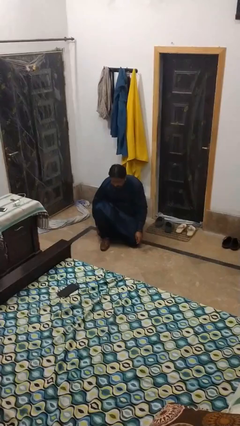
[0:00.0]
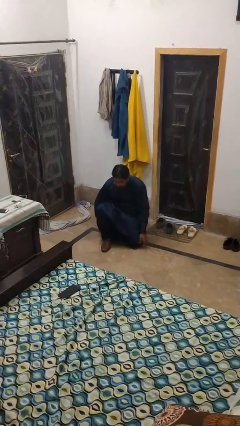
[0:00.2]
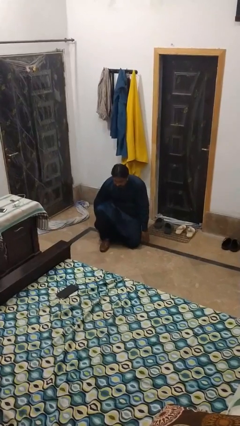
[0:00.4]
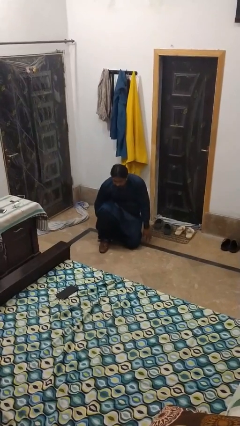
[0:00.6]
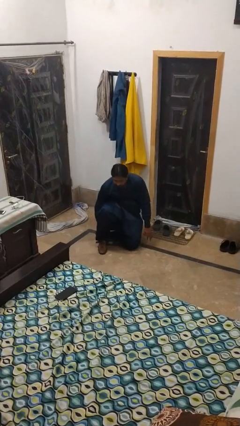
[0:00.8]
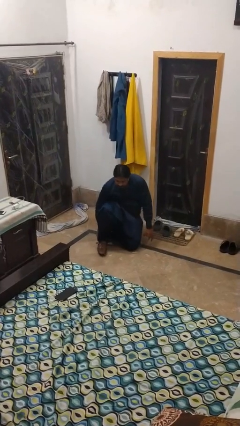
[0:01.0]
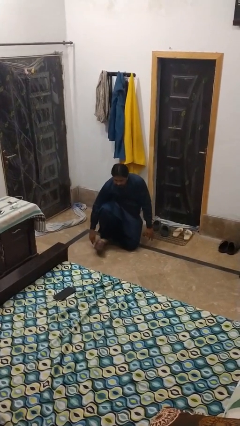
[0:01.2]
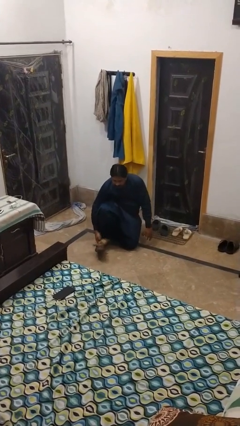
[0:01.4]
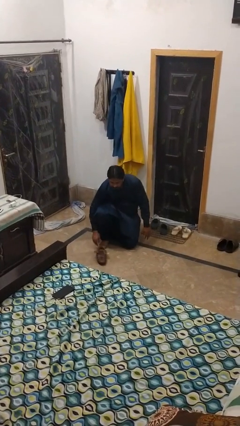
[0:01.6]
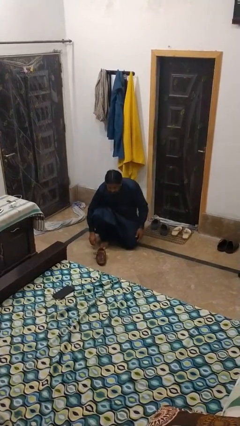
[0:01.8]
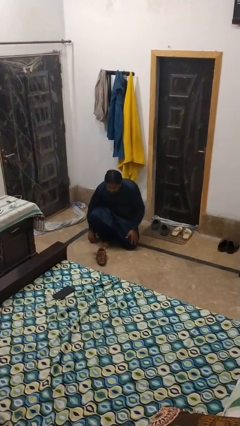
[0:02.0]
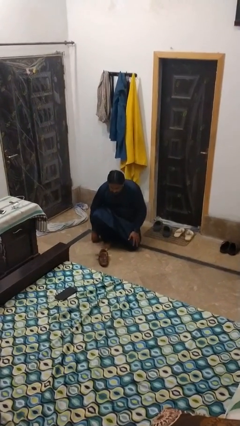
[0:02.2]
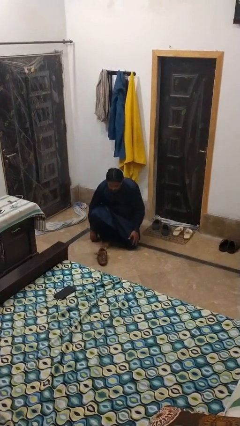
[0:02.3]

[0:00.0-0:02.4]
person takes off shoes

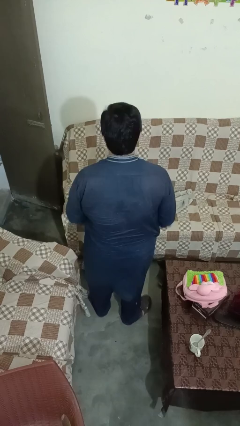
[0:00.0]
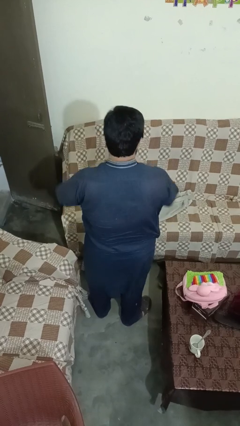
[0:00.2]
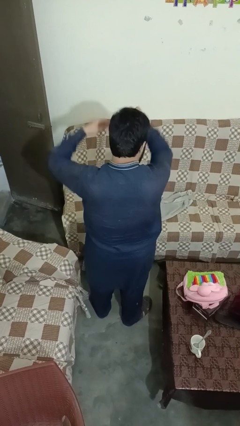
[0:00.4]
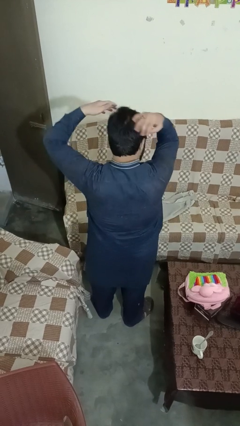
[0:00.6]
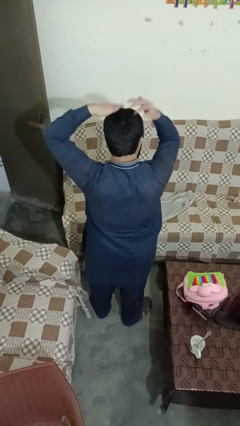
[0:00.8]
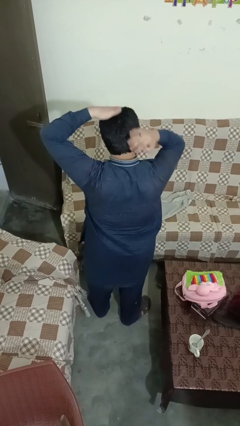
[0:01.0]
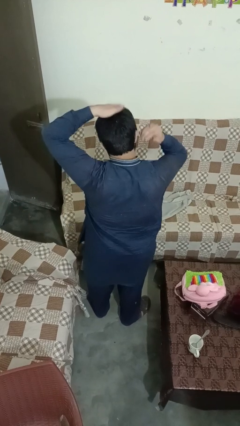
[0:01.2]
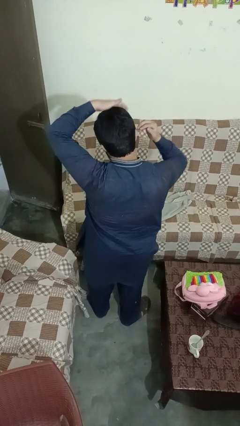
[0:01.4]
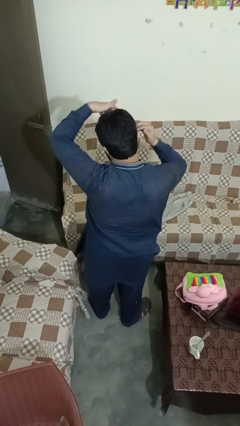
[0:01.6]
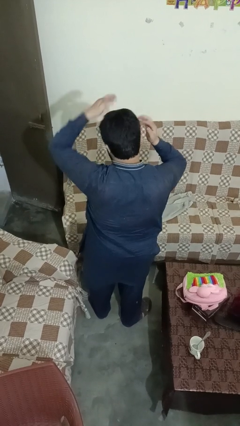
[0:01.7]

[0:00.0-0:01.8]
person strokes hair

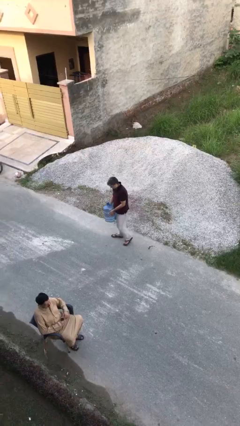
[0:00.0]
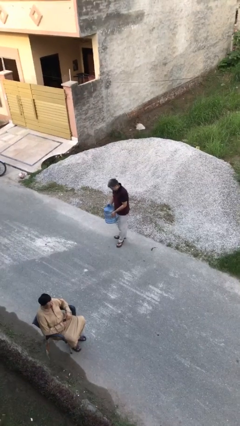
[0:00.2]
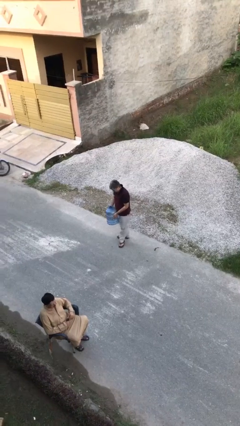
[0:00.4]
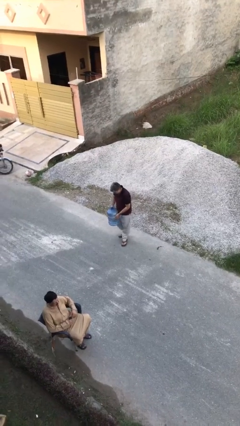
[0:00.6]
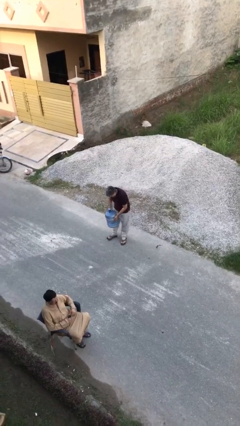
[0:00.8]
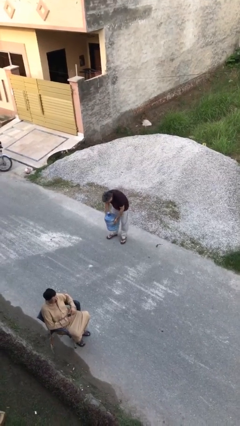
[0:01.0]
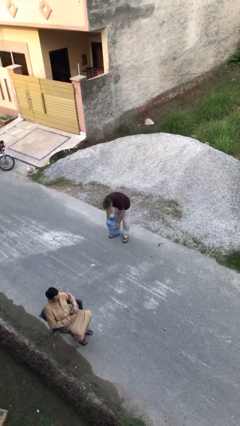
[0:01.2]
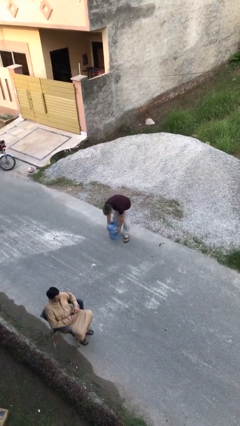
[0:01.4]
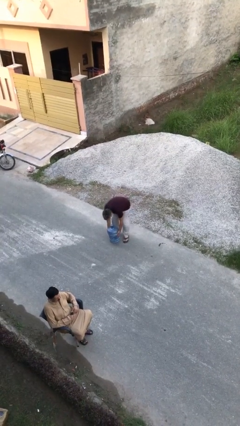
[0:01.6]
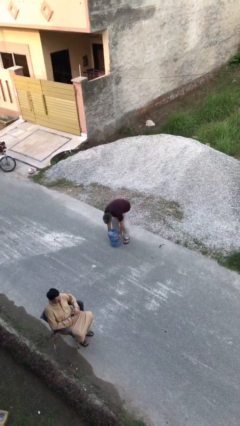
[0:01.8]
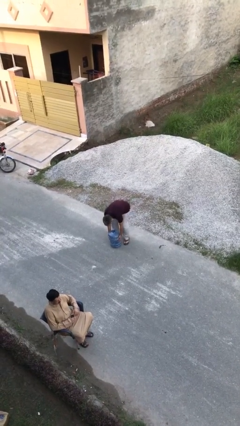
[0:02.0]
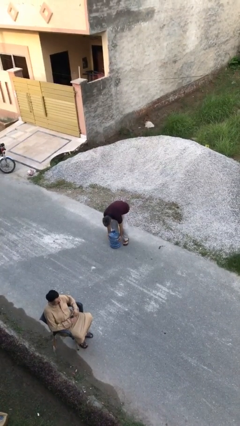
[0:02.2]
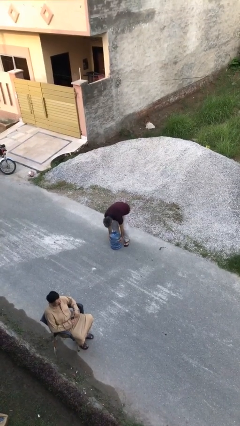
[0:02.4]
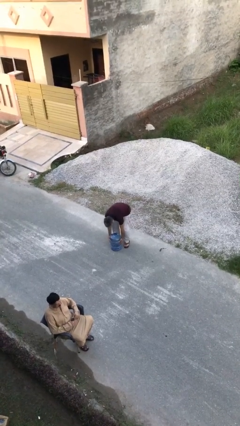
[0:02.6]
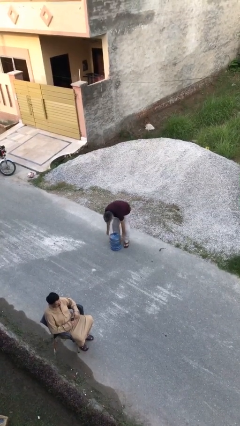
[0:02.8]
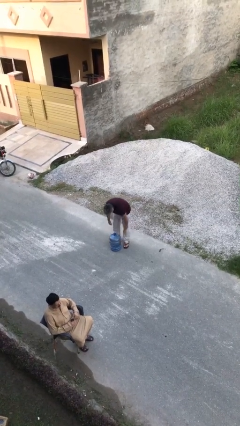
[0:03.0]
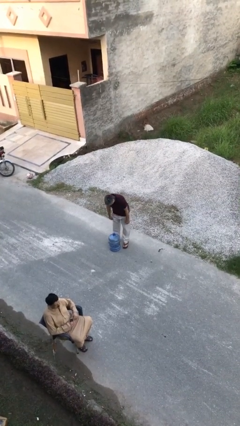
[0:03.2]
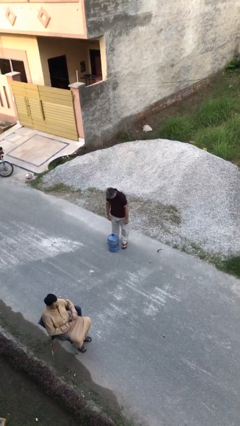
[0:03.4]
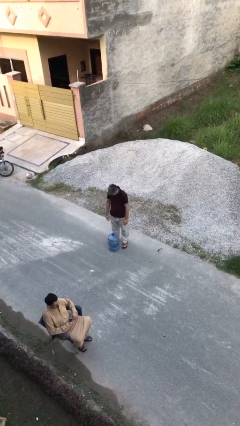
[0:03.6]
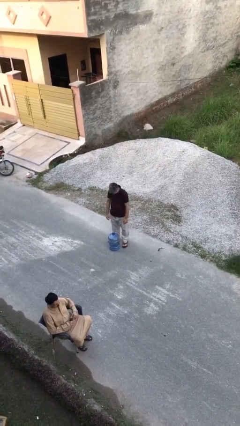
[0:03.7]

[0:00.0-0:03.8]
person puts down object on floor

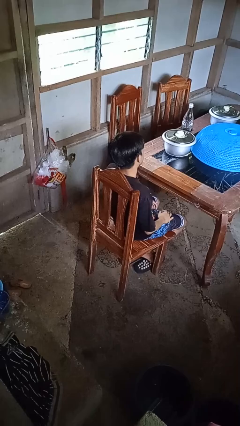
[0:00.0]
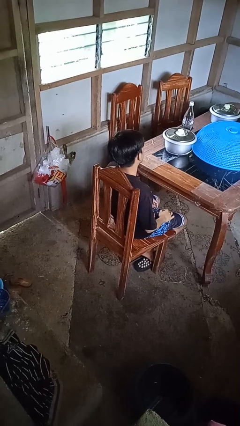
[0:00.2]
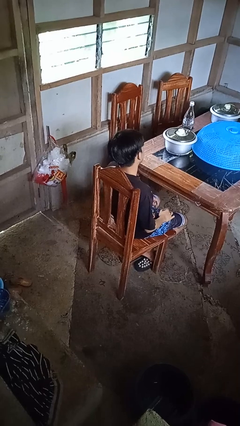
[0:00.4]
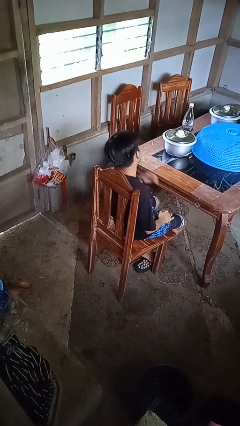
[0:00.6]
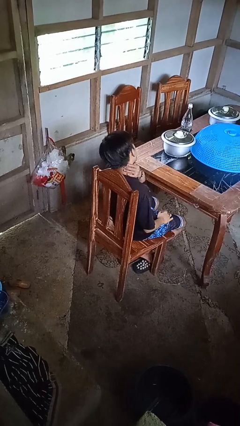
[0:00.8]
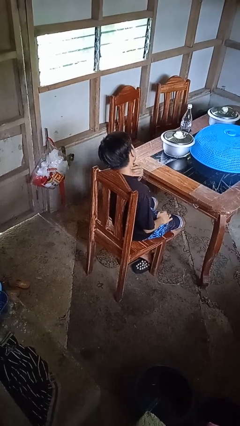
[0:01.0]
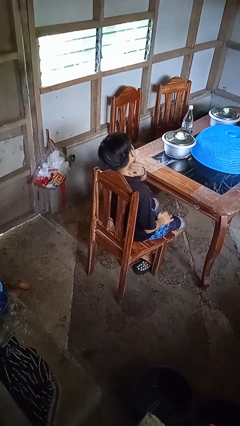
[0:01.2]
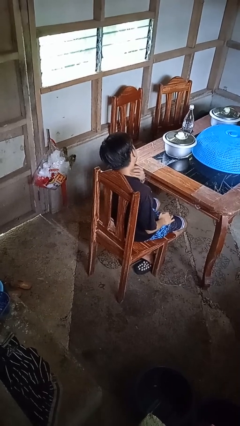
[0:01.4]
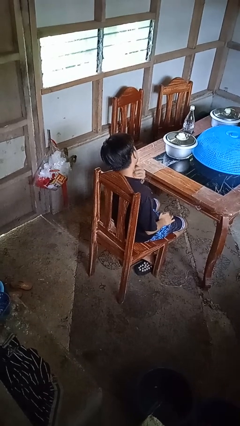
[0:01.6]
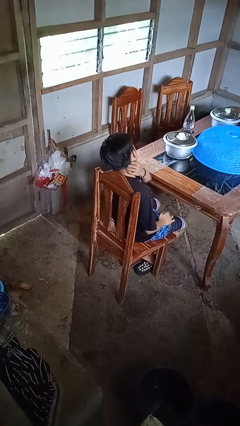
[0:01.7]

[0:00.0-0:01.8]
person rubs neck

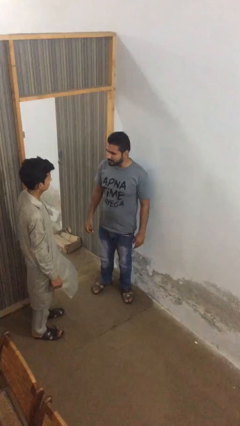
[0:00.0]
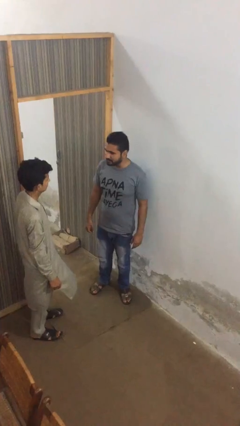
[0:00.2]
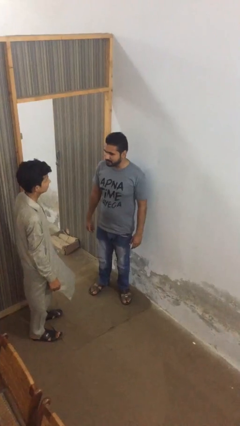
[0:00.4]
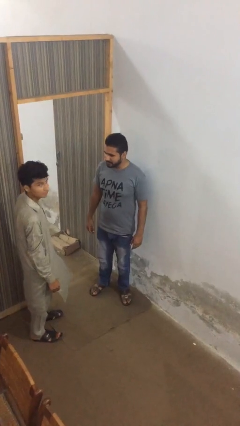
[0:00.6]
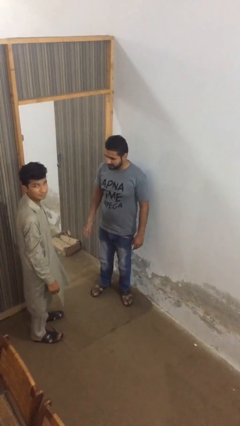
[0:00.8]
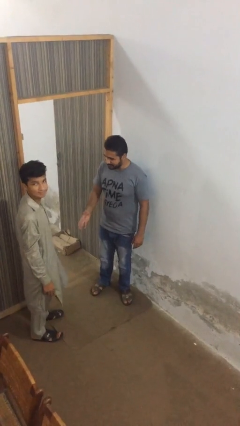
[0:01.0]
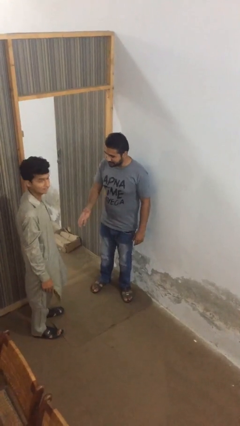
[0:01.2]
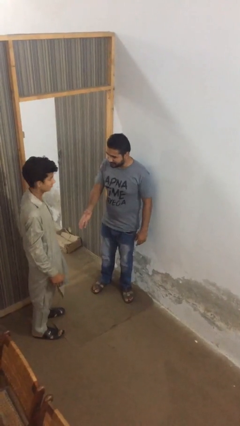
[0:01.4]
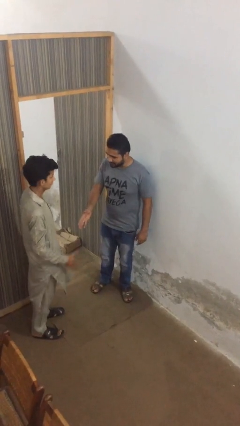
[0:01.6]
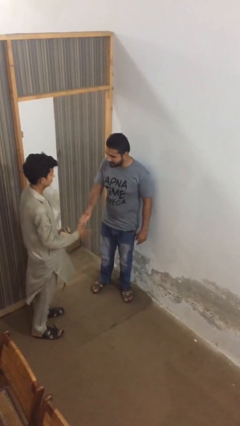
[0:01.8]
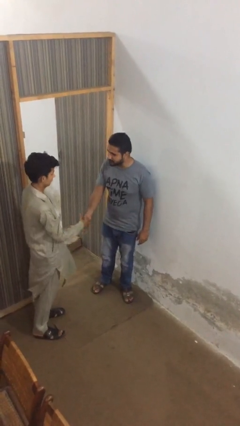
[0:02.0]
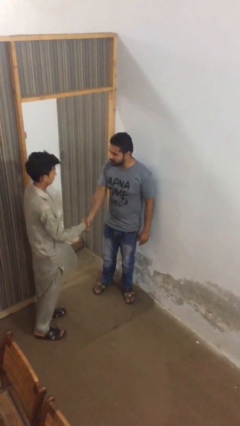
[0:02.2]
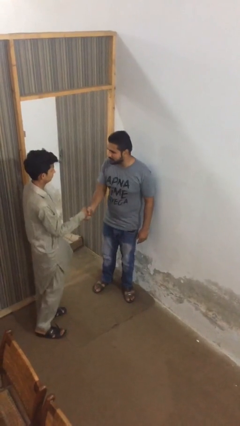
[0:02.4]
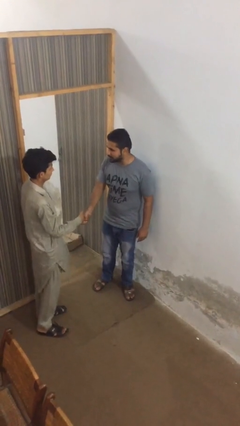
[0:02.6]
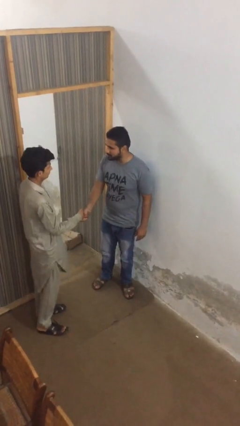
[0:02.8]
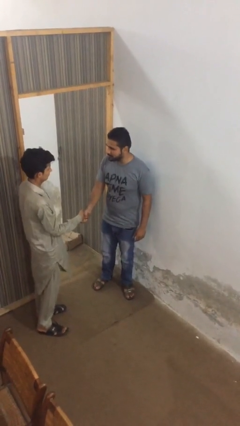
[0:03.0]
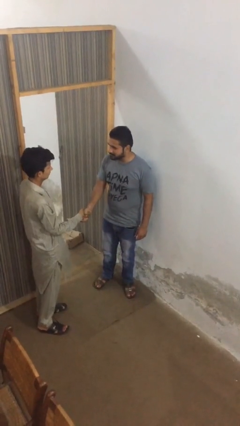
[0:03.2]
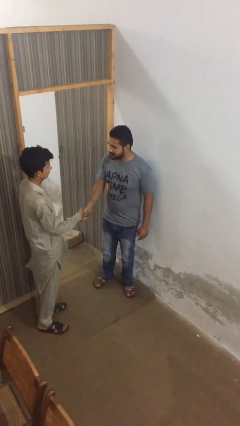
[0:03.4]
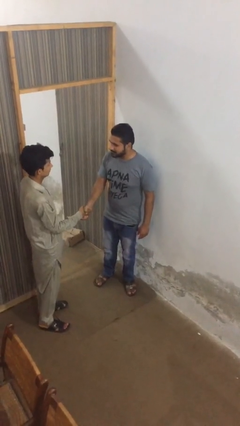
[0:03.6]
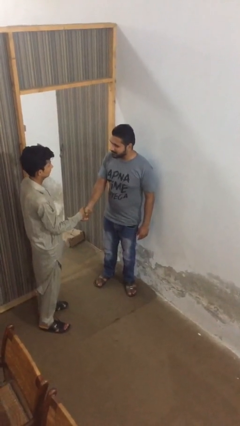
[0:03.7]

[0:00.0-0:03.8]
person shakes hand

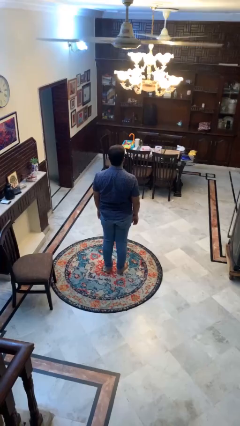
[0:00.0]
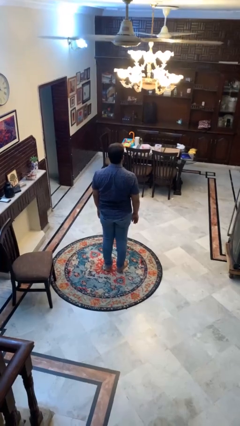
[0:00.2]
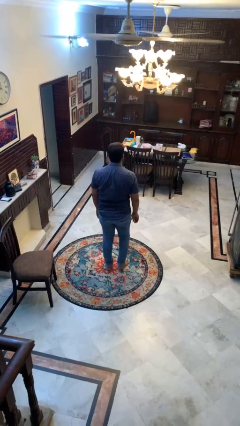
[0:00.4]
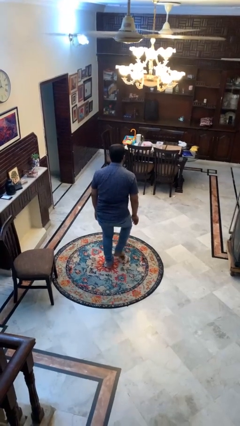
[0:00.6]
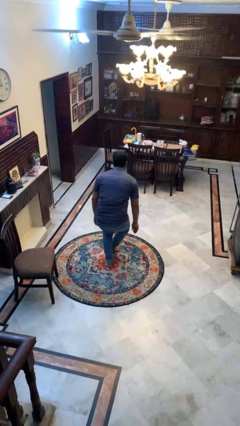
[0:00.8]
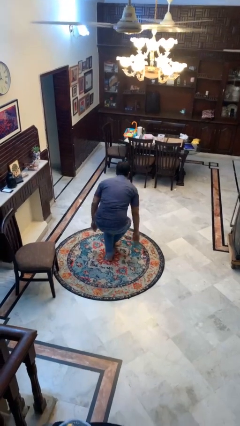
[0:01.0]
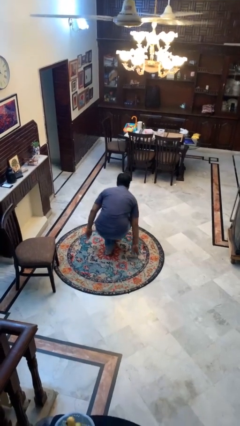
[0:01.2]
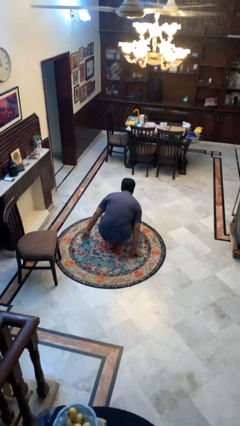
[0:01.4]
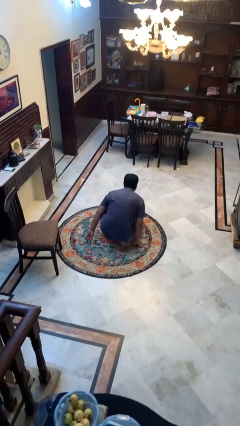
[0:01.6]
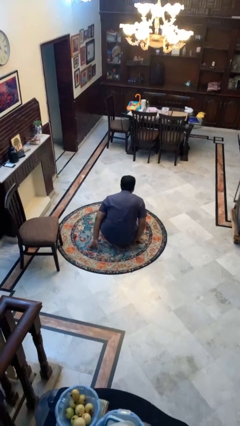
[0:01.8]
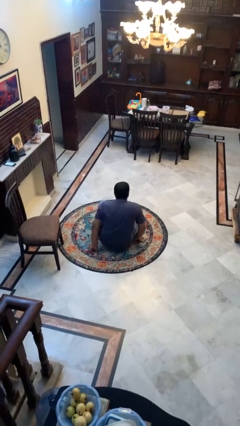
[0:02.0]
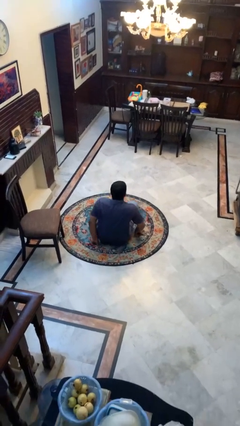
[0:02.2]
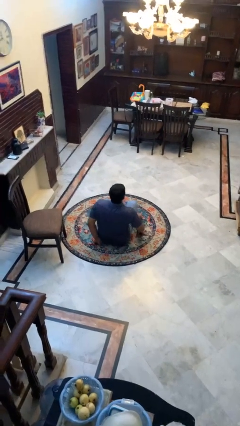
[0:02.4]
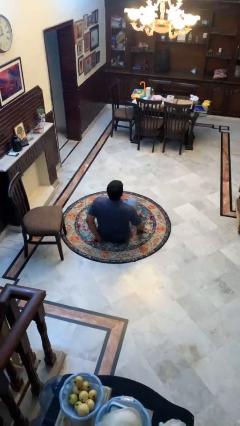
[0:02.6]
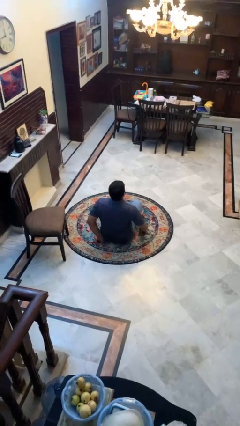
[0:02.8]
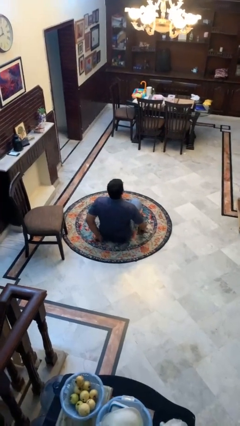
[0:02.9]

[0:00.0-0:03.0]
person sits crisscross

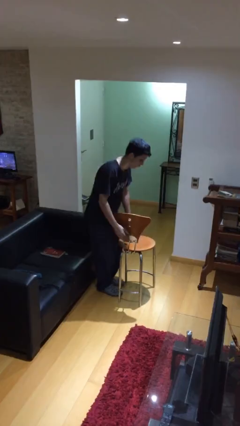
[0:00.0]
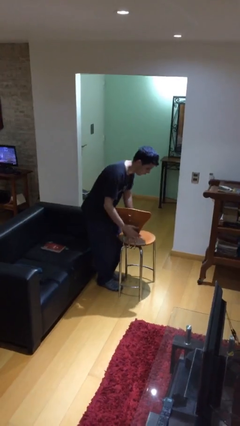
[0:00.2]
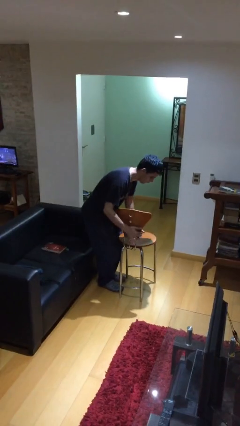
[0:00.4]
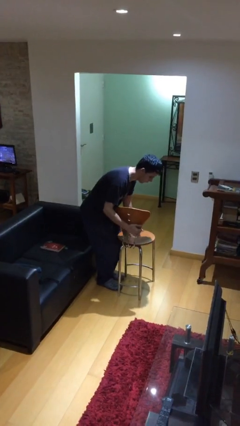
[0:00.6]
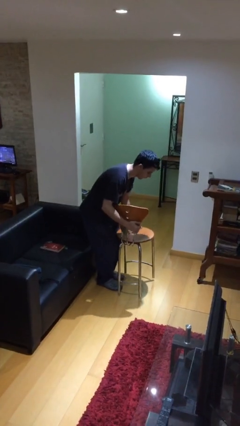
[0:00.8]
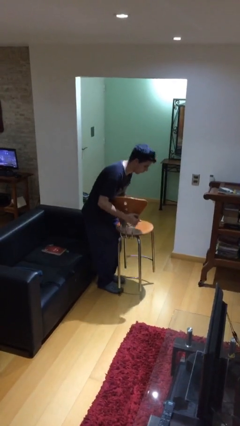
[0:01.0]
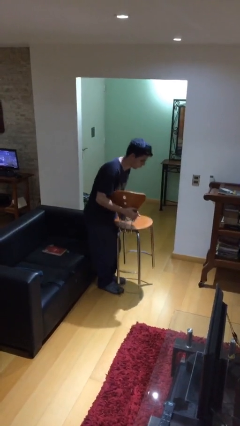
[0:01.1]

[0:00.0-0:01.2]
person picks up object from floor
